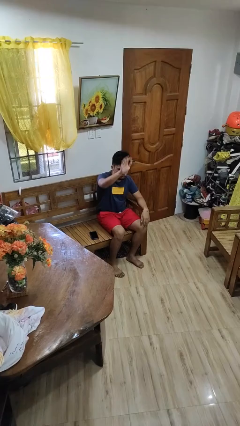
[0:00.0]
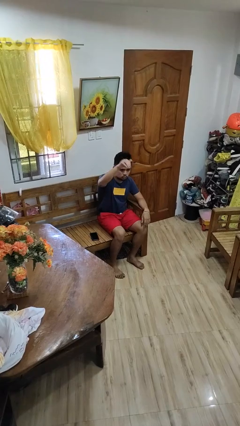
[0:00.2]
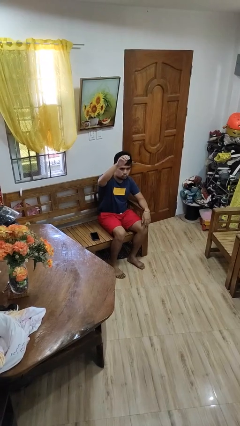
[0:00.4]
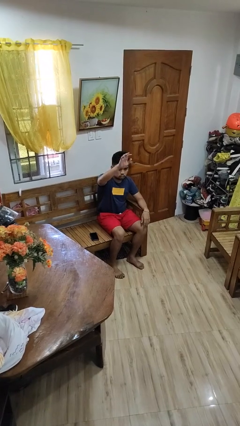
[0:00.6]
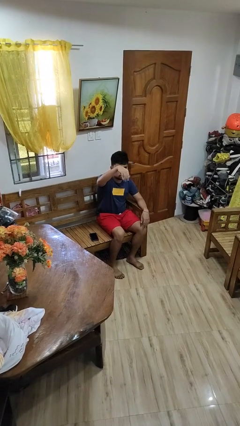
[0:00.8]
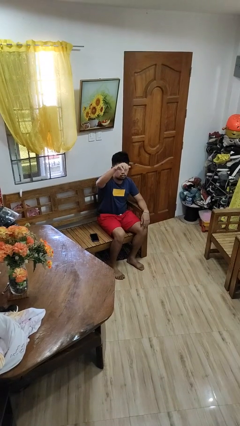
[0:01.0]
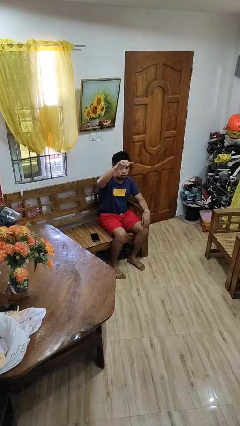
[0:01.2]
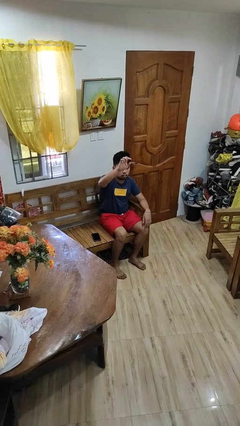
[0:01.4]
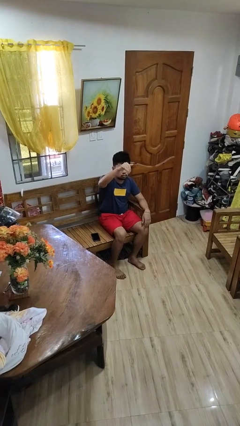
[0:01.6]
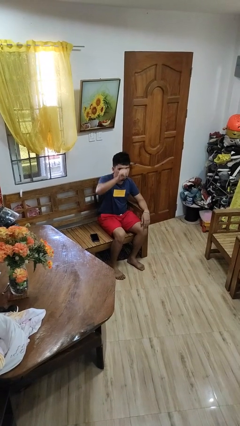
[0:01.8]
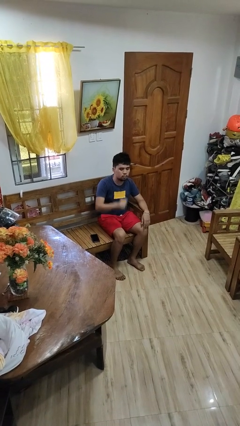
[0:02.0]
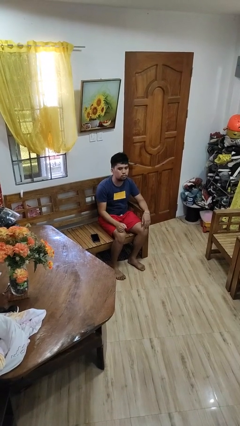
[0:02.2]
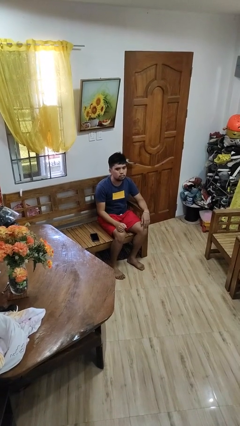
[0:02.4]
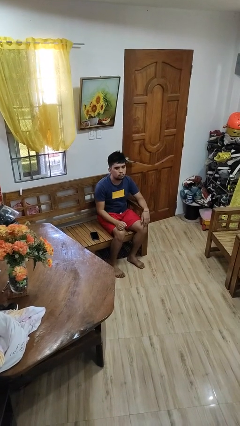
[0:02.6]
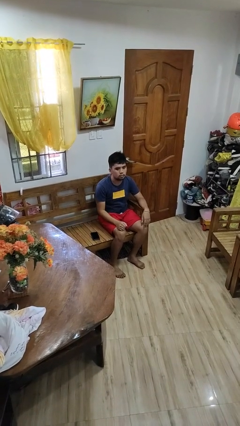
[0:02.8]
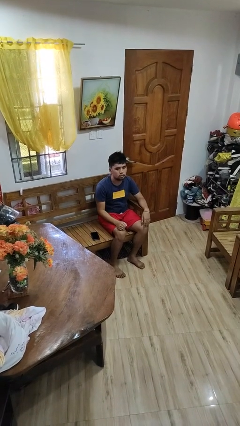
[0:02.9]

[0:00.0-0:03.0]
person gestures come here

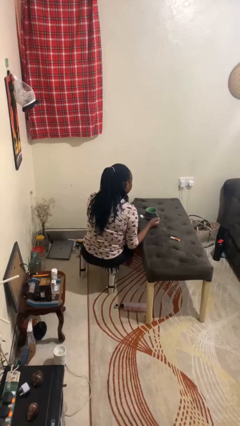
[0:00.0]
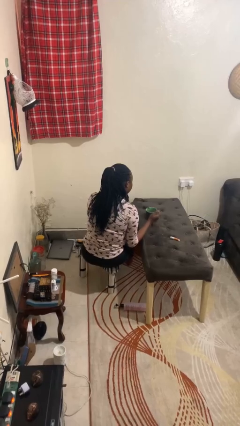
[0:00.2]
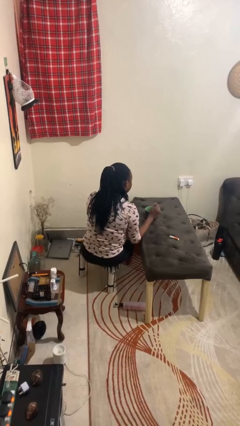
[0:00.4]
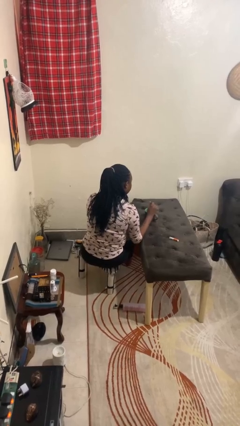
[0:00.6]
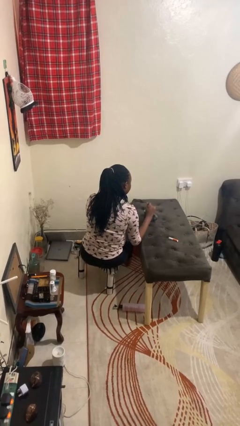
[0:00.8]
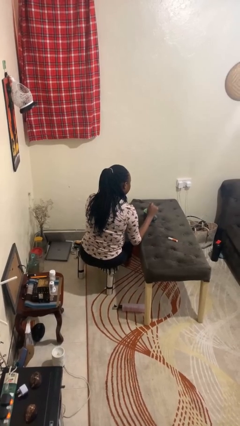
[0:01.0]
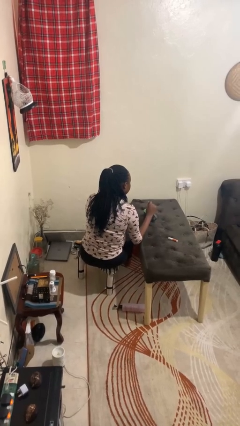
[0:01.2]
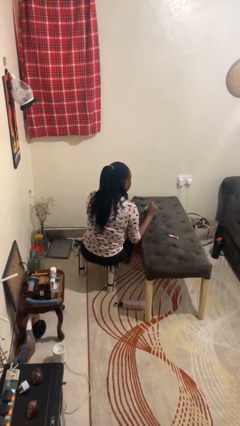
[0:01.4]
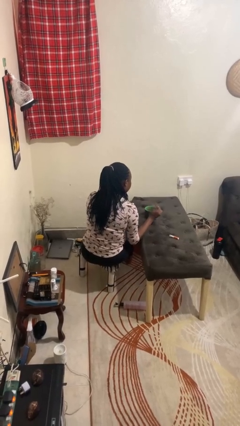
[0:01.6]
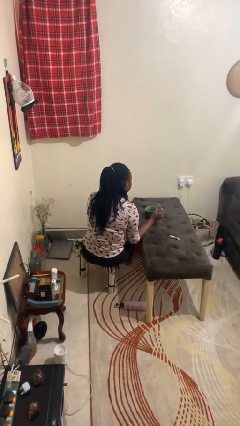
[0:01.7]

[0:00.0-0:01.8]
person stirs mug

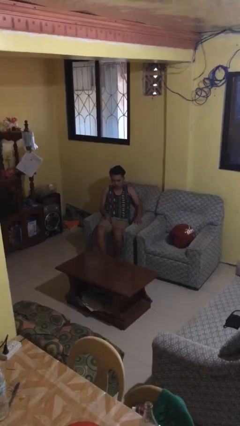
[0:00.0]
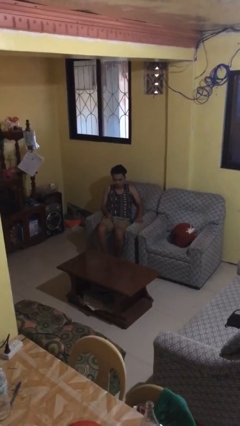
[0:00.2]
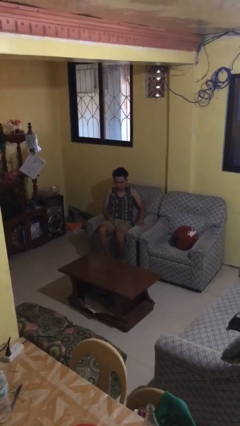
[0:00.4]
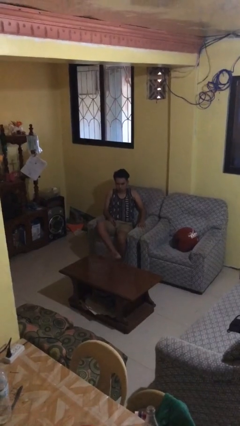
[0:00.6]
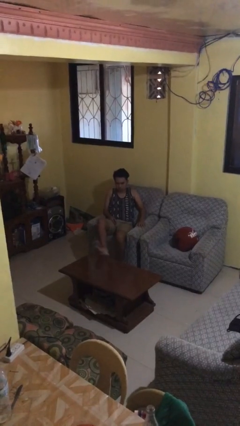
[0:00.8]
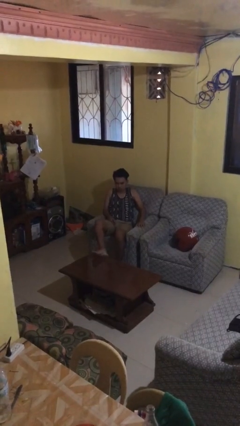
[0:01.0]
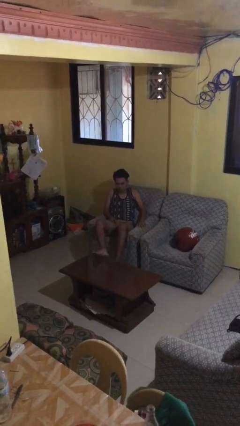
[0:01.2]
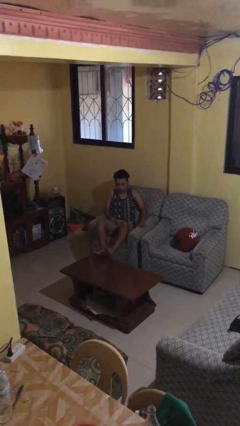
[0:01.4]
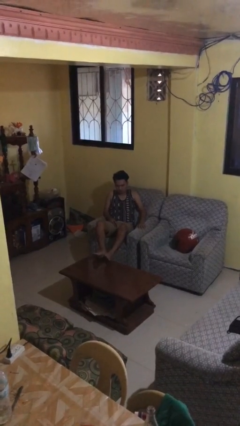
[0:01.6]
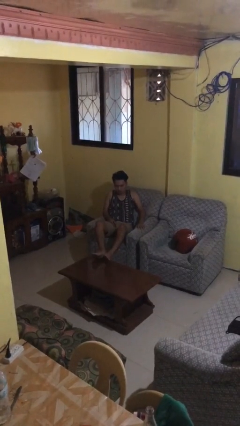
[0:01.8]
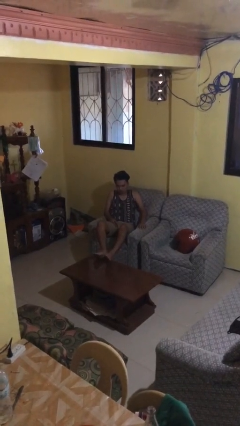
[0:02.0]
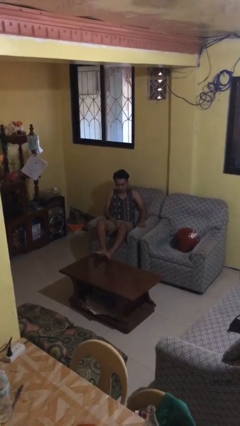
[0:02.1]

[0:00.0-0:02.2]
person puts feet up

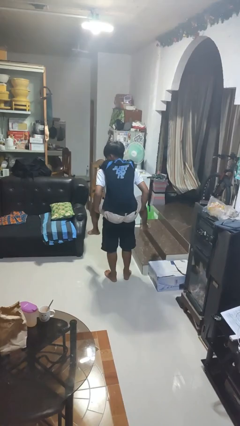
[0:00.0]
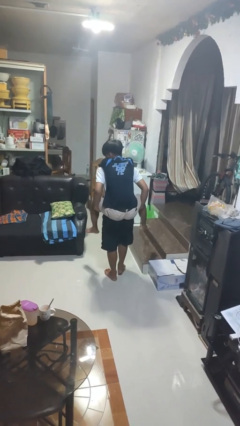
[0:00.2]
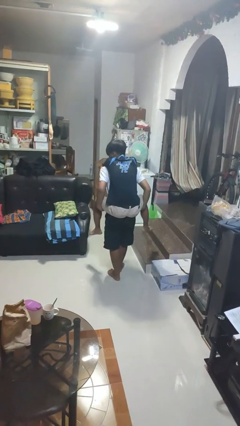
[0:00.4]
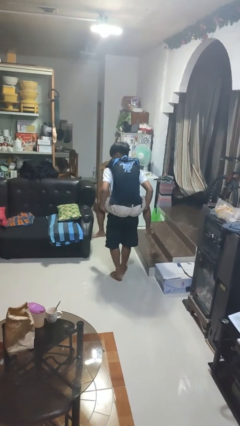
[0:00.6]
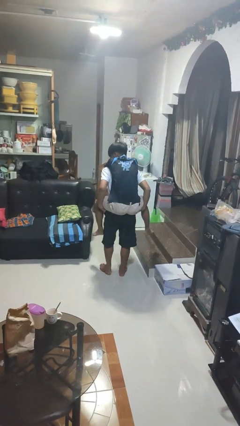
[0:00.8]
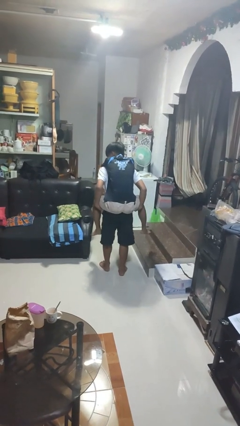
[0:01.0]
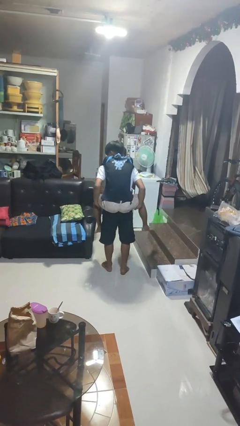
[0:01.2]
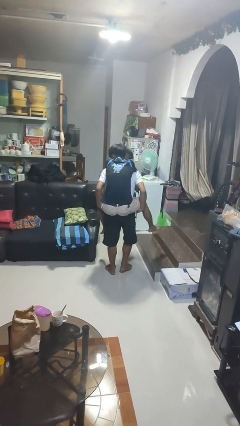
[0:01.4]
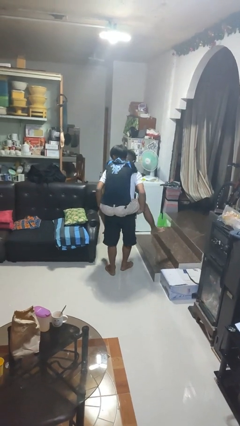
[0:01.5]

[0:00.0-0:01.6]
person carries person on back

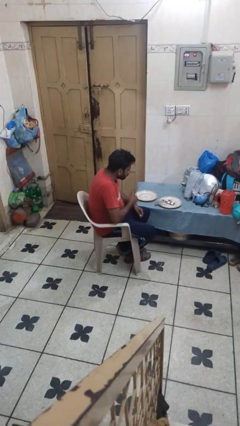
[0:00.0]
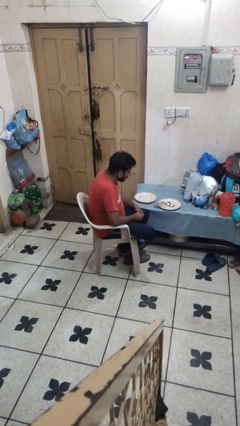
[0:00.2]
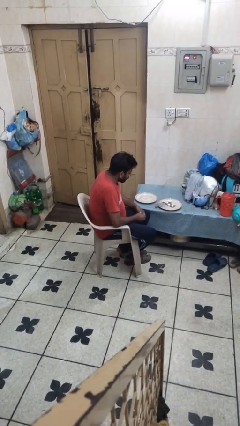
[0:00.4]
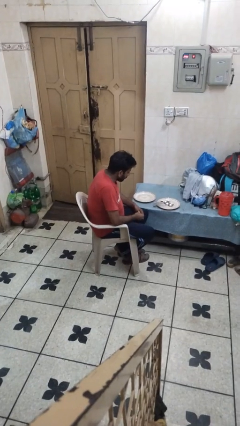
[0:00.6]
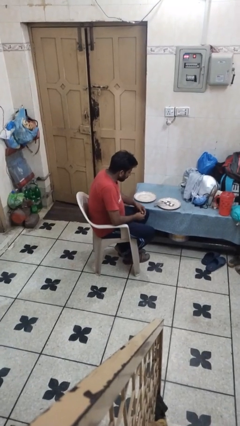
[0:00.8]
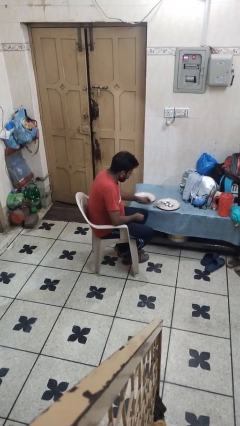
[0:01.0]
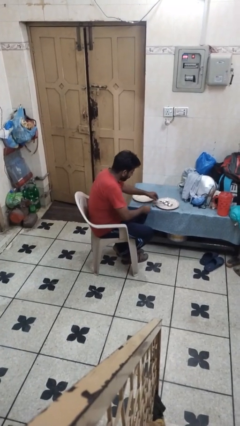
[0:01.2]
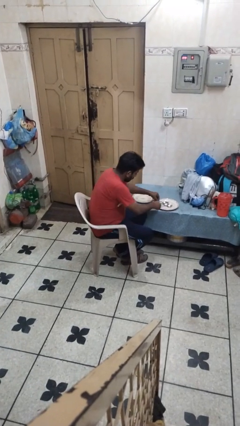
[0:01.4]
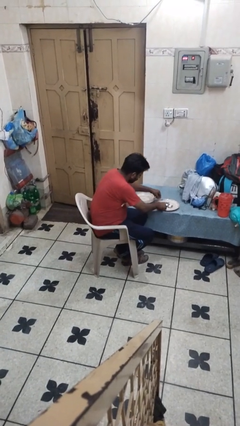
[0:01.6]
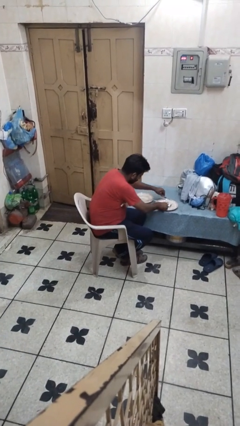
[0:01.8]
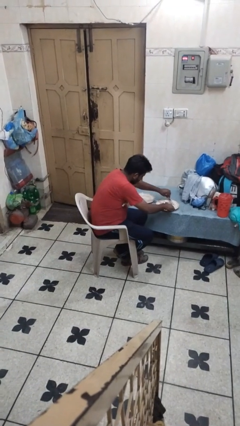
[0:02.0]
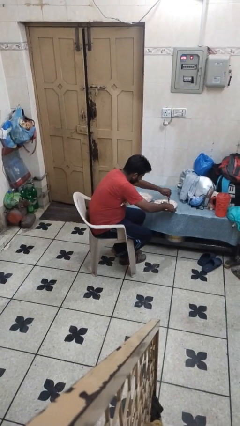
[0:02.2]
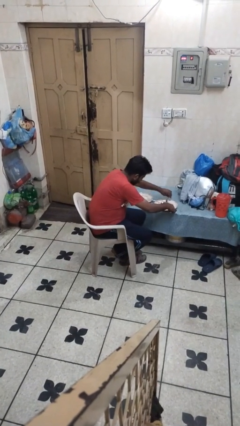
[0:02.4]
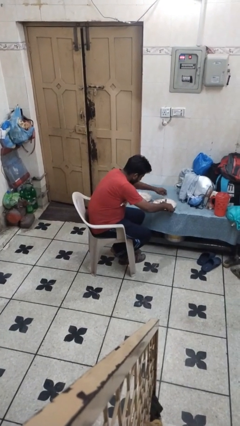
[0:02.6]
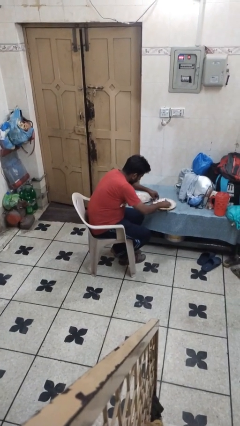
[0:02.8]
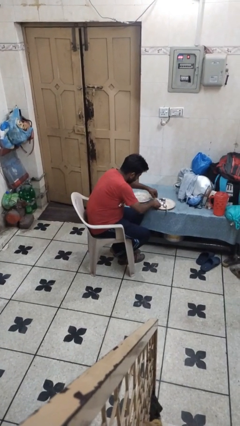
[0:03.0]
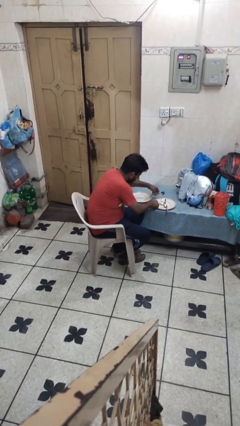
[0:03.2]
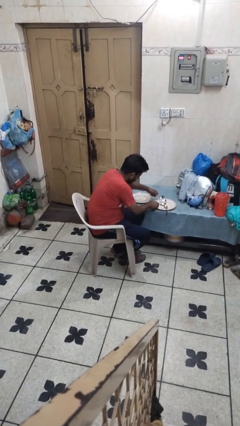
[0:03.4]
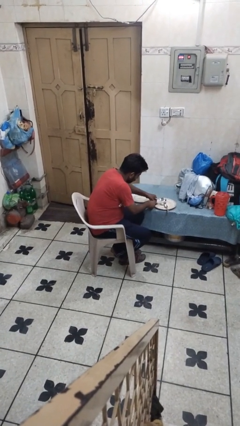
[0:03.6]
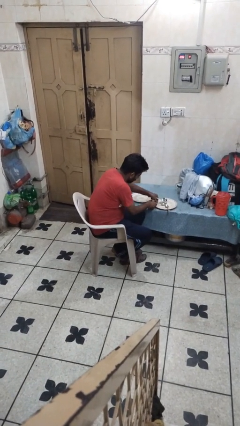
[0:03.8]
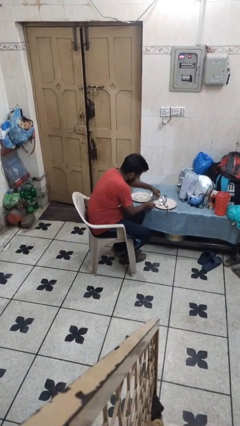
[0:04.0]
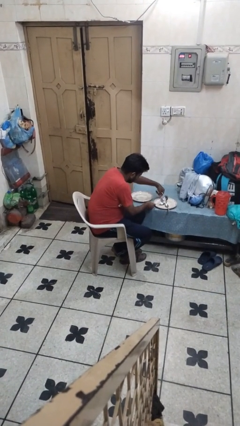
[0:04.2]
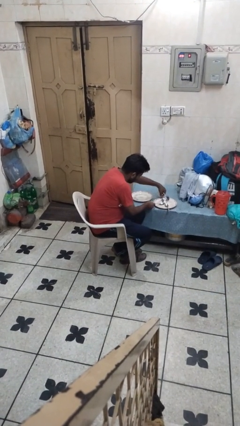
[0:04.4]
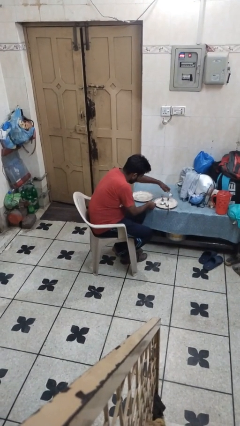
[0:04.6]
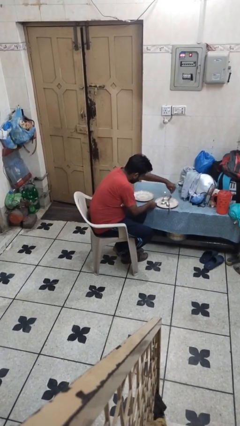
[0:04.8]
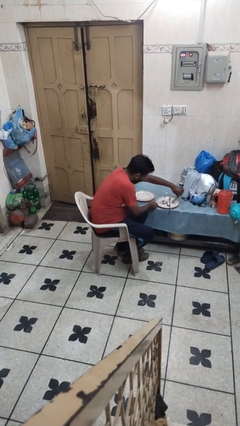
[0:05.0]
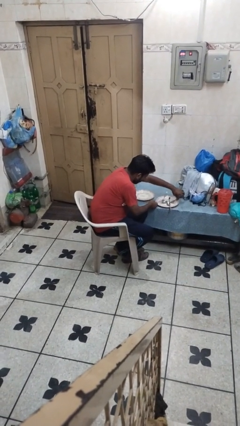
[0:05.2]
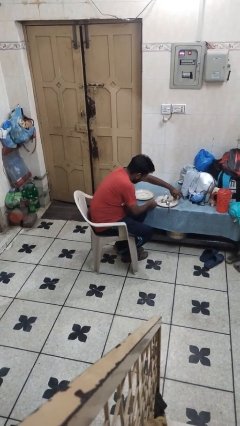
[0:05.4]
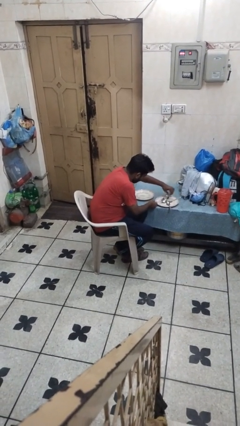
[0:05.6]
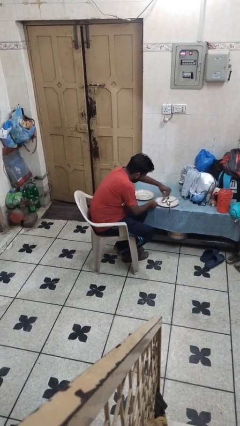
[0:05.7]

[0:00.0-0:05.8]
person sets table

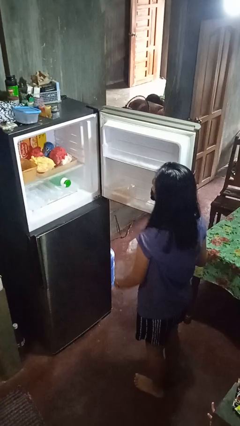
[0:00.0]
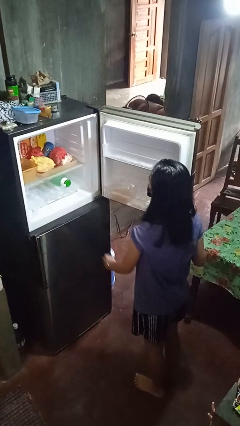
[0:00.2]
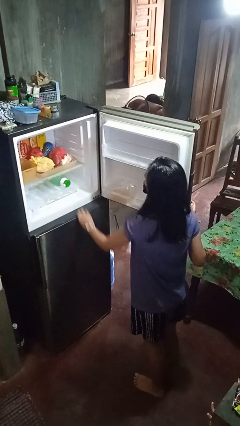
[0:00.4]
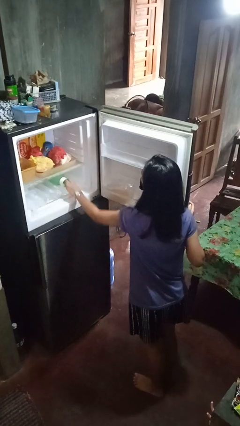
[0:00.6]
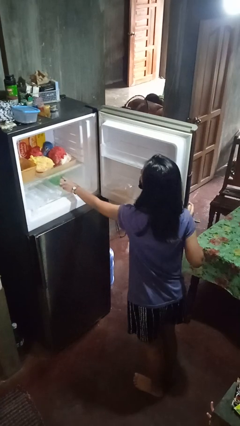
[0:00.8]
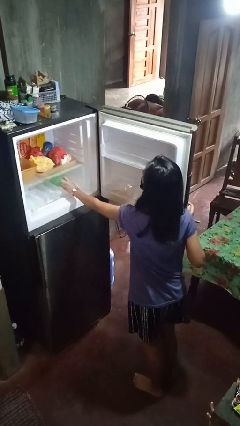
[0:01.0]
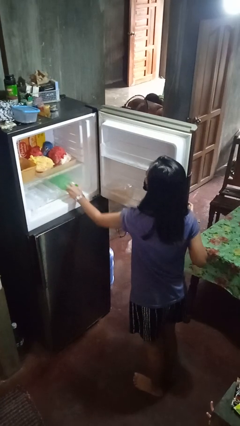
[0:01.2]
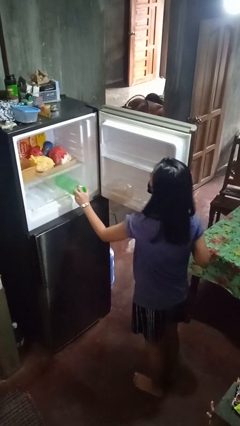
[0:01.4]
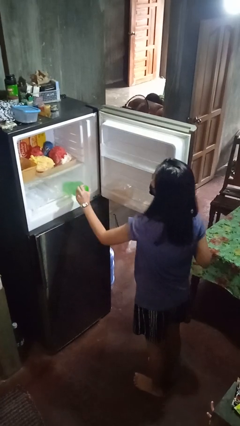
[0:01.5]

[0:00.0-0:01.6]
person takes object from refrigerator

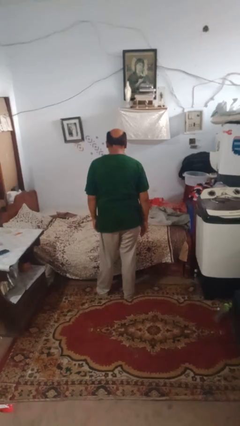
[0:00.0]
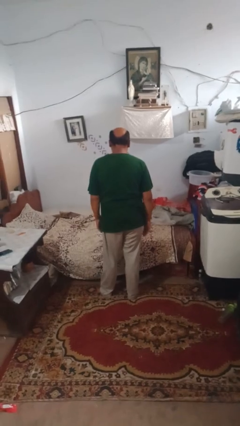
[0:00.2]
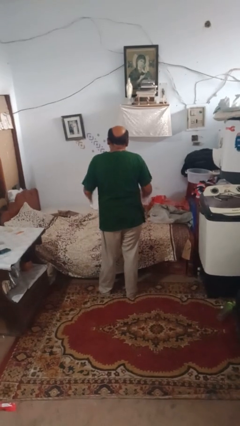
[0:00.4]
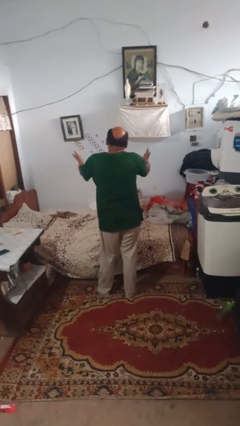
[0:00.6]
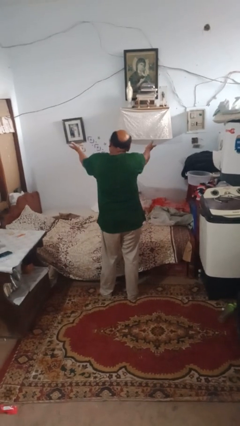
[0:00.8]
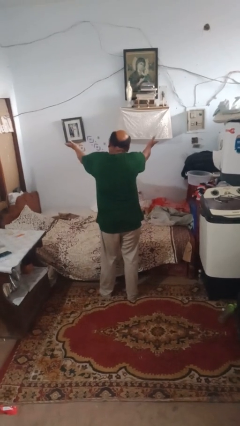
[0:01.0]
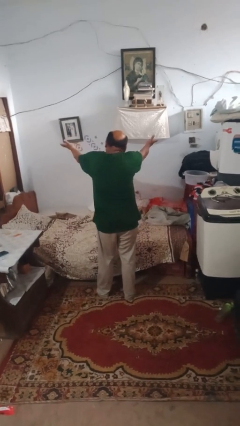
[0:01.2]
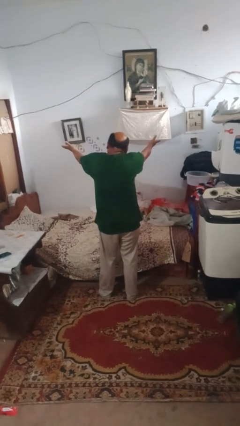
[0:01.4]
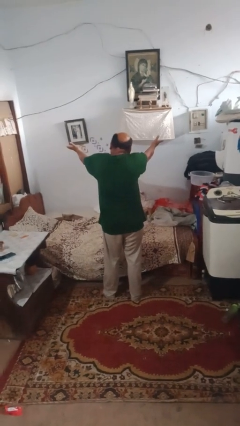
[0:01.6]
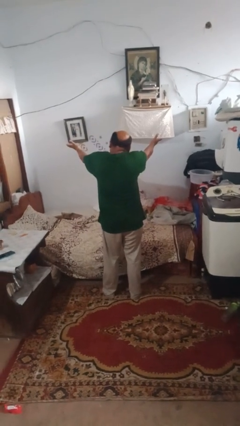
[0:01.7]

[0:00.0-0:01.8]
person shrugs
